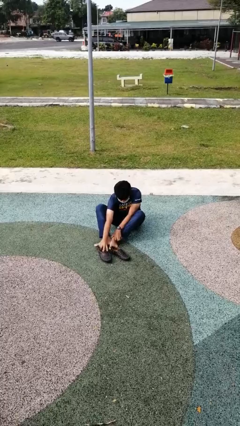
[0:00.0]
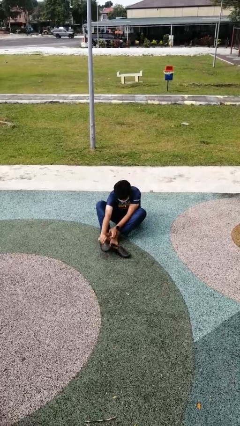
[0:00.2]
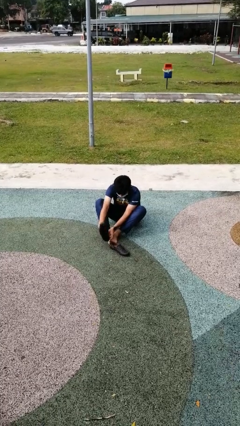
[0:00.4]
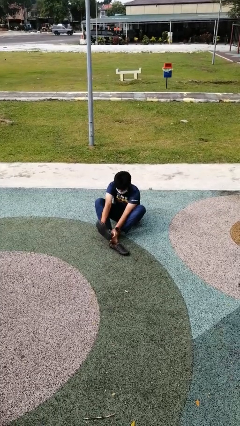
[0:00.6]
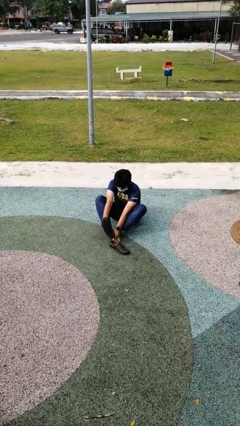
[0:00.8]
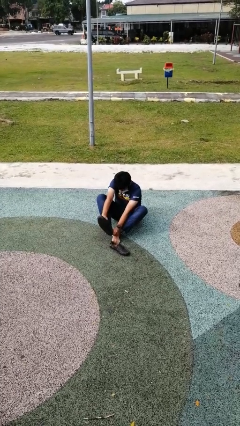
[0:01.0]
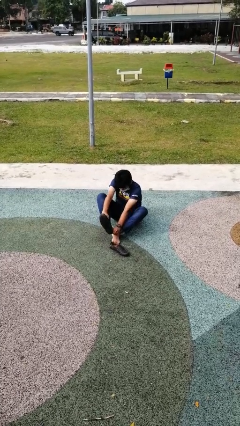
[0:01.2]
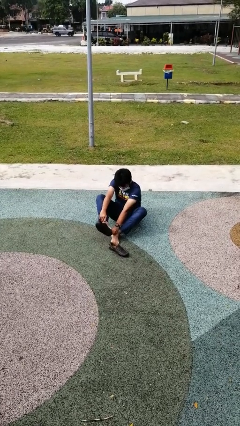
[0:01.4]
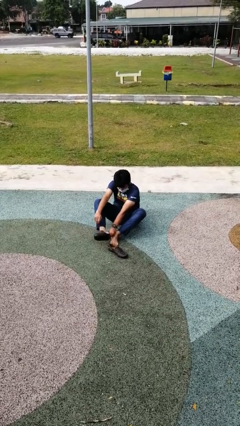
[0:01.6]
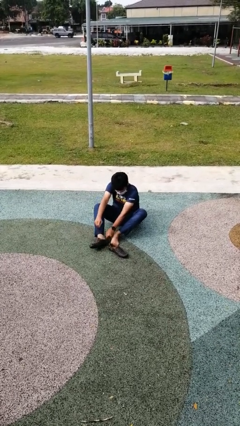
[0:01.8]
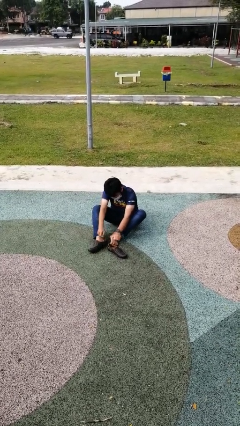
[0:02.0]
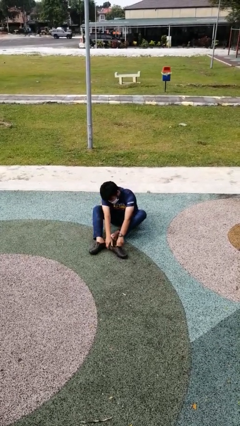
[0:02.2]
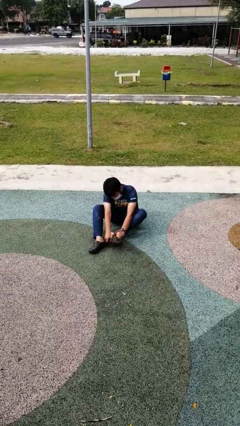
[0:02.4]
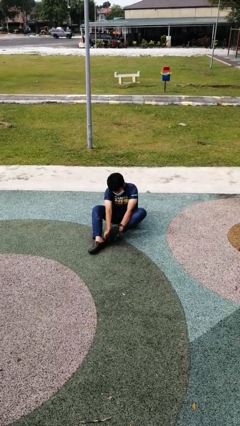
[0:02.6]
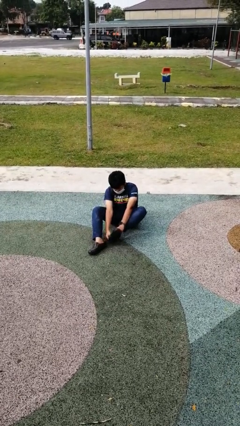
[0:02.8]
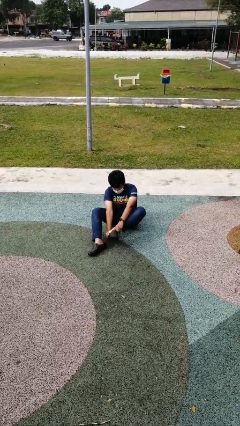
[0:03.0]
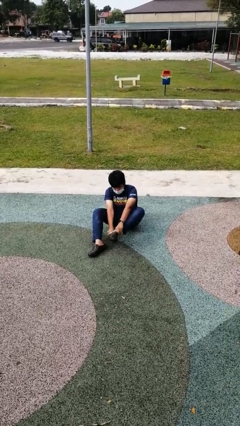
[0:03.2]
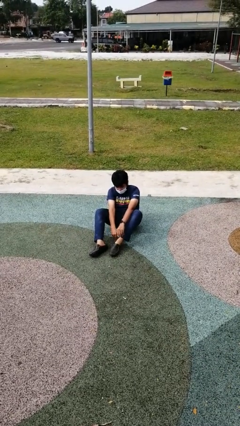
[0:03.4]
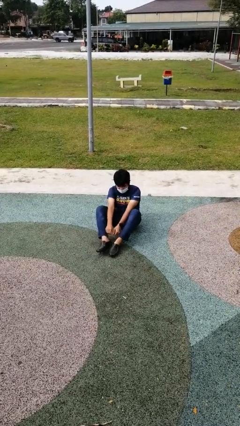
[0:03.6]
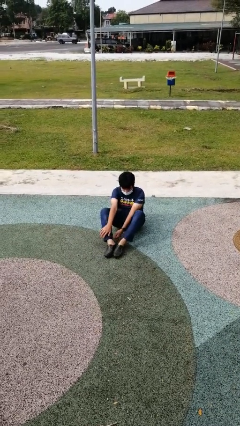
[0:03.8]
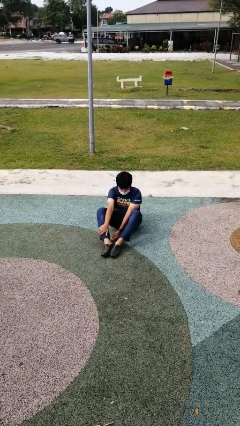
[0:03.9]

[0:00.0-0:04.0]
person puts on shoes

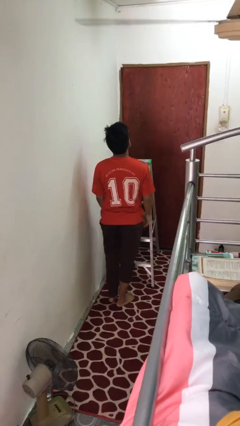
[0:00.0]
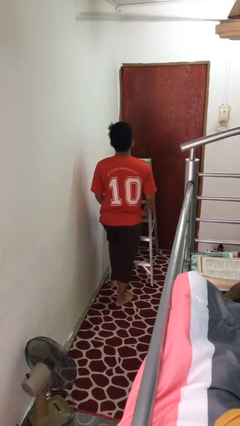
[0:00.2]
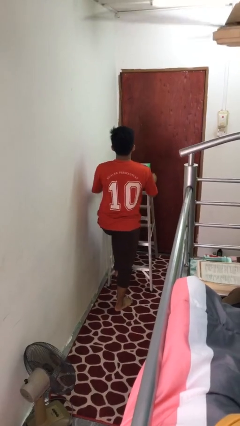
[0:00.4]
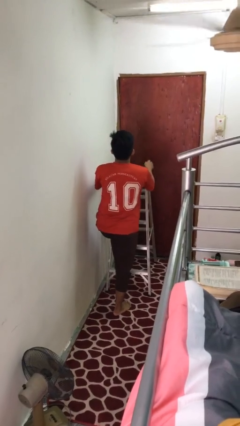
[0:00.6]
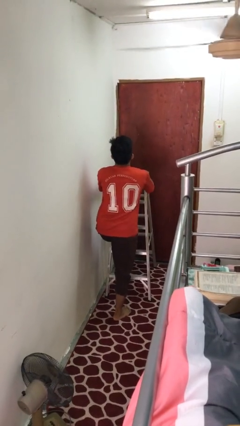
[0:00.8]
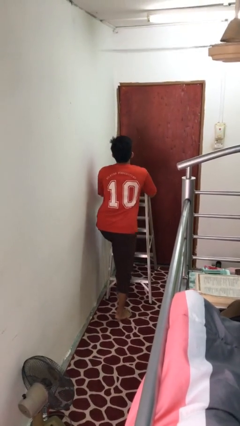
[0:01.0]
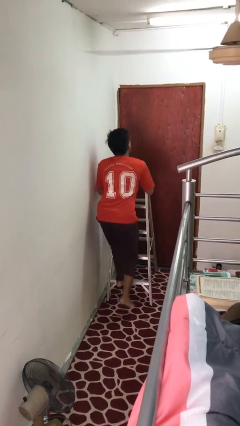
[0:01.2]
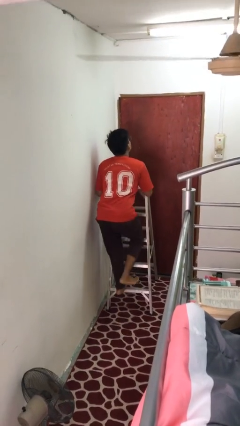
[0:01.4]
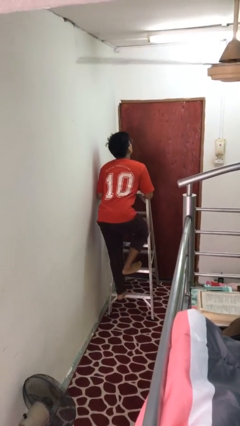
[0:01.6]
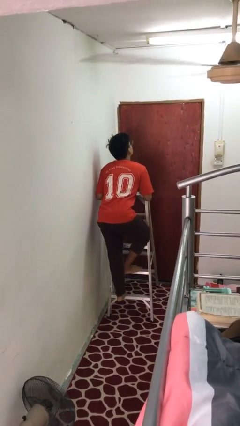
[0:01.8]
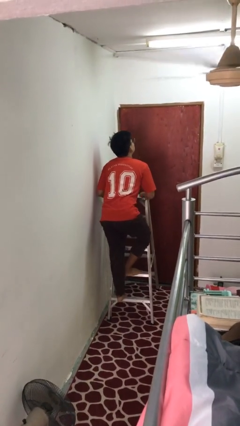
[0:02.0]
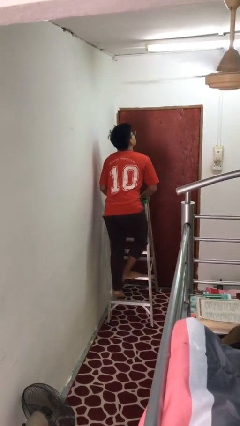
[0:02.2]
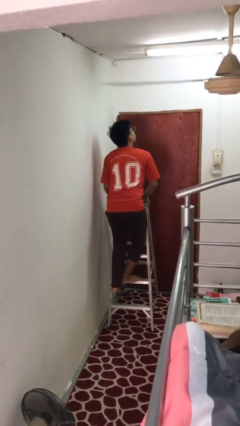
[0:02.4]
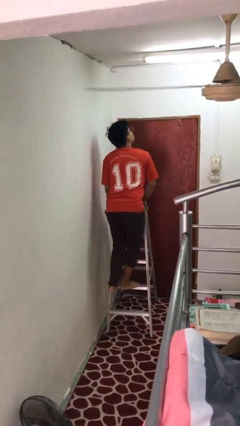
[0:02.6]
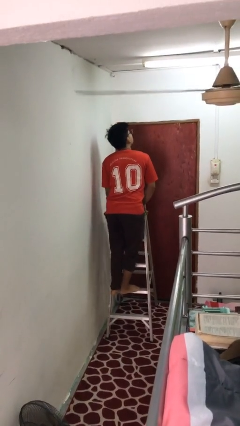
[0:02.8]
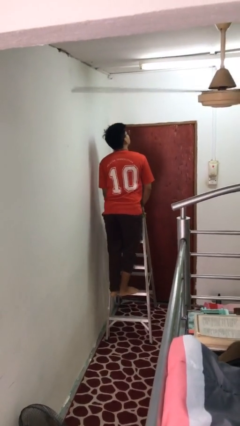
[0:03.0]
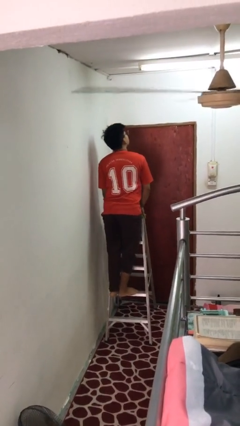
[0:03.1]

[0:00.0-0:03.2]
person climbs up ladder

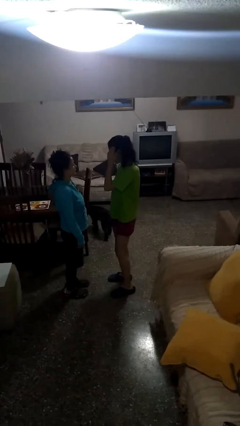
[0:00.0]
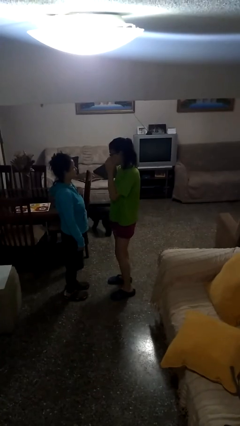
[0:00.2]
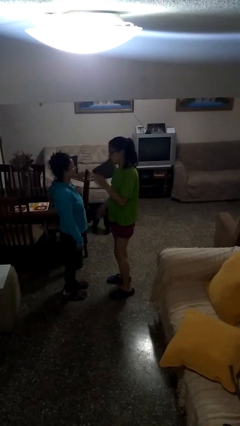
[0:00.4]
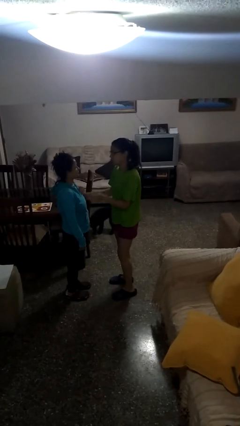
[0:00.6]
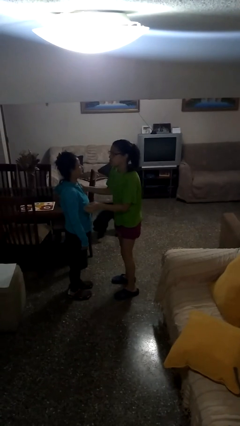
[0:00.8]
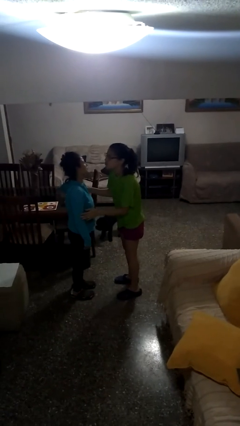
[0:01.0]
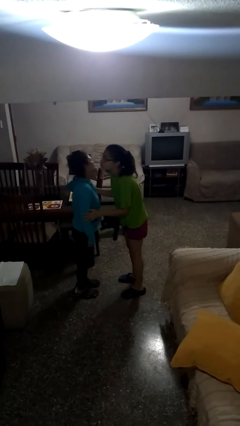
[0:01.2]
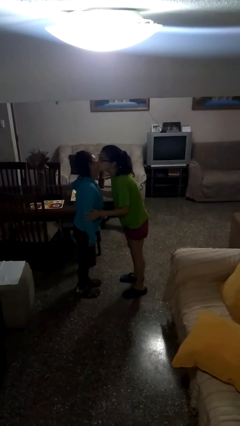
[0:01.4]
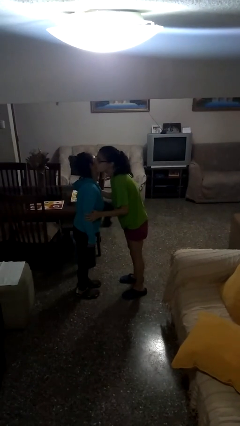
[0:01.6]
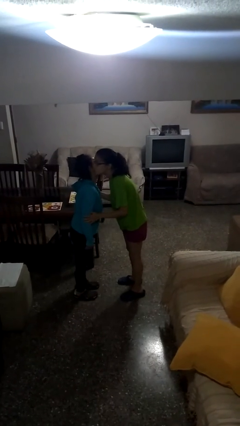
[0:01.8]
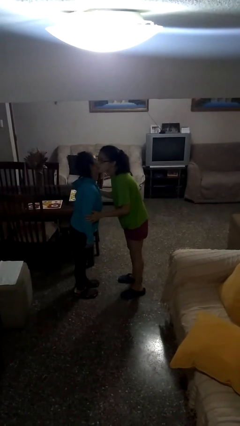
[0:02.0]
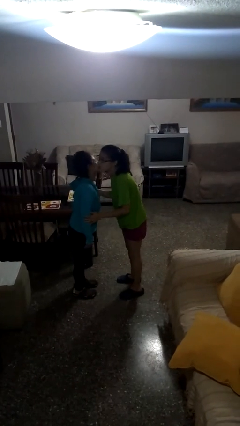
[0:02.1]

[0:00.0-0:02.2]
person kisses cheek of person

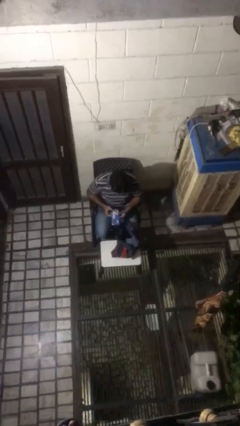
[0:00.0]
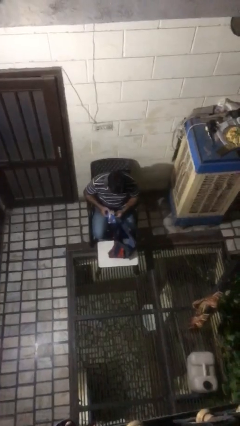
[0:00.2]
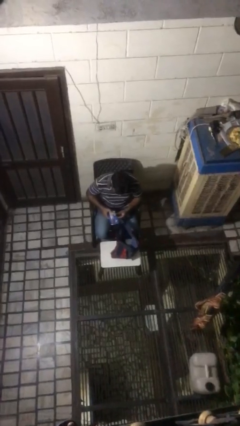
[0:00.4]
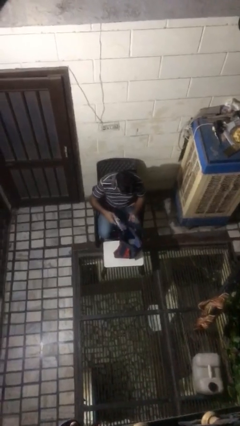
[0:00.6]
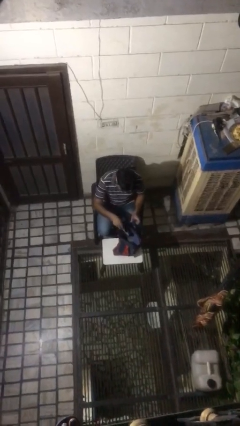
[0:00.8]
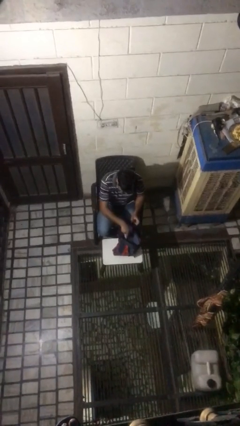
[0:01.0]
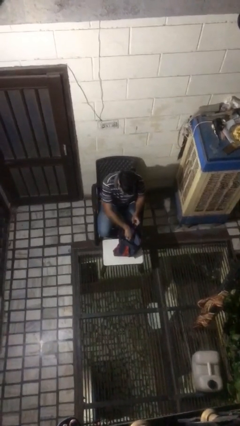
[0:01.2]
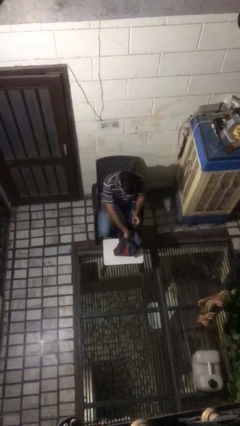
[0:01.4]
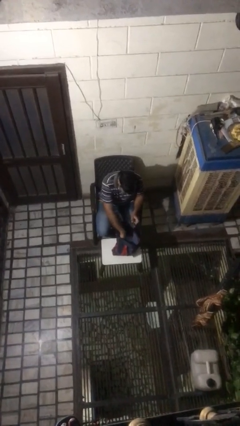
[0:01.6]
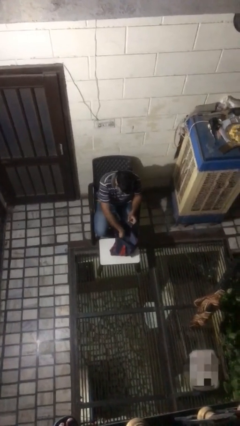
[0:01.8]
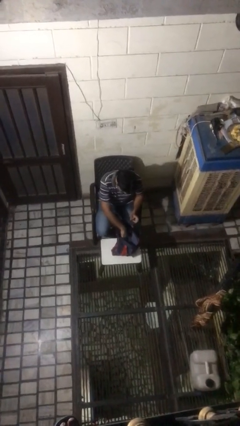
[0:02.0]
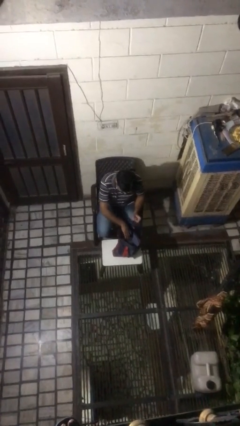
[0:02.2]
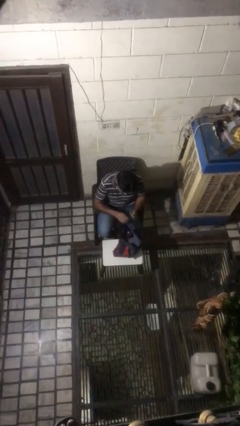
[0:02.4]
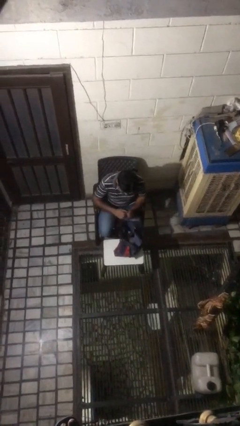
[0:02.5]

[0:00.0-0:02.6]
person puts object into bag

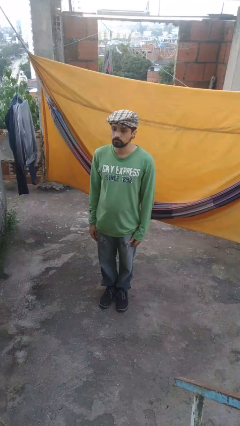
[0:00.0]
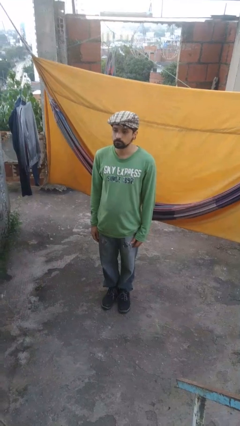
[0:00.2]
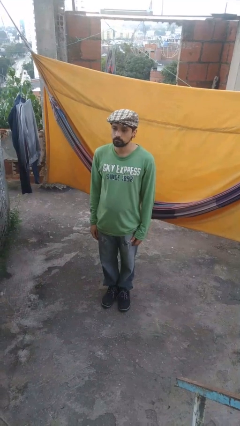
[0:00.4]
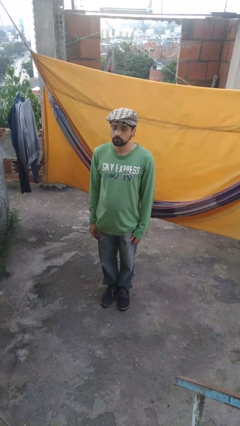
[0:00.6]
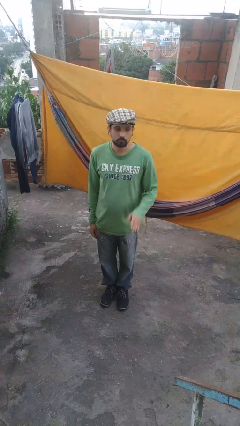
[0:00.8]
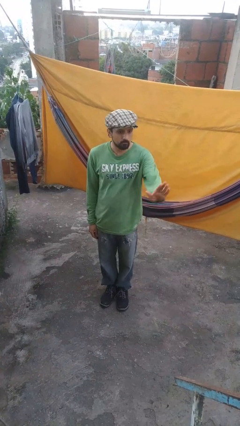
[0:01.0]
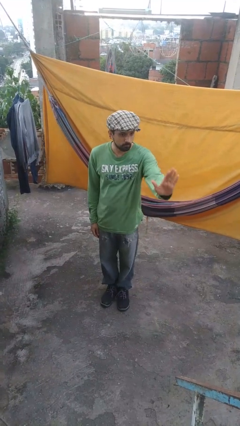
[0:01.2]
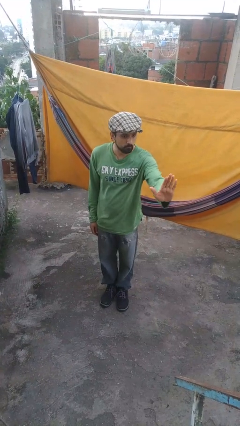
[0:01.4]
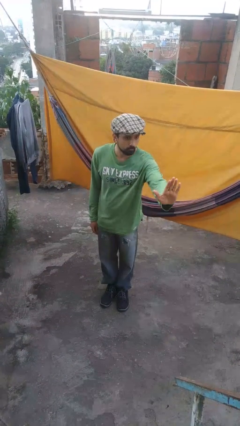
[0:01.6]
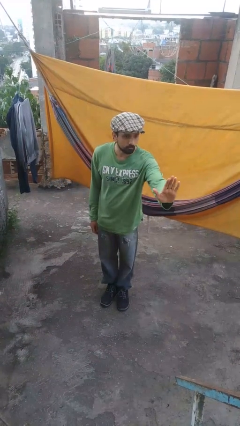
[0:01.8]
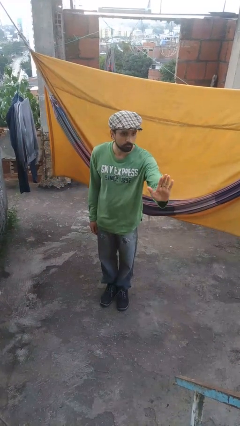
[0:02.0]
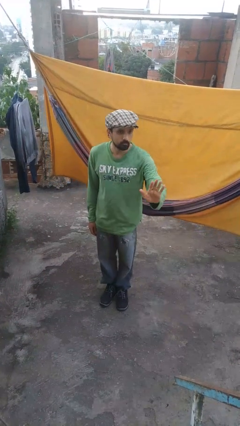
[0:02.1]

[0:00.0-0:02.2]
person gestures stop

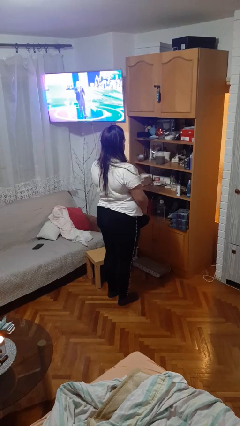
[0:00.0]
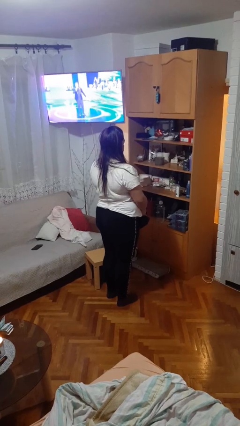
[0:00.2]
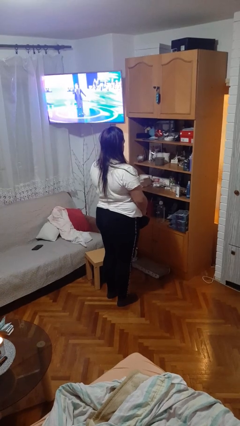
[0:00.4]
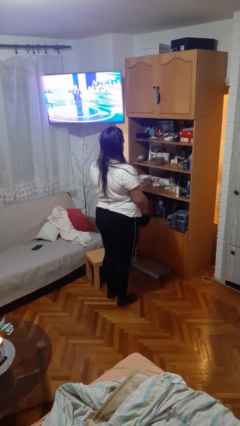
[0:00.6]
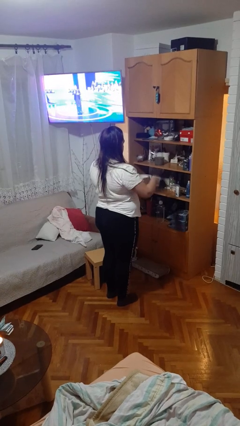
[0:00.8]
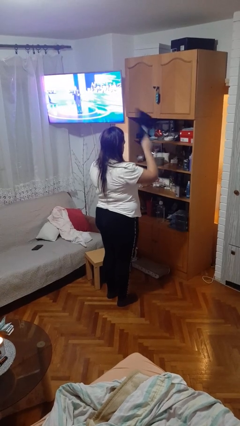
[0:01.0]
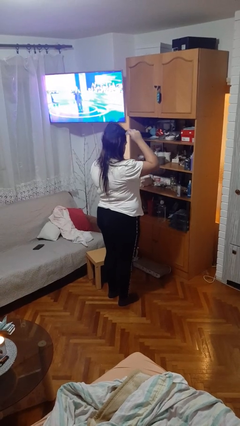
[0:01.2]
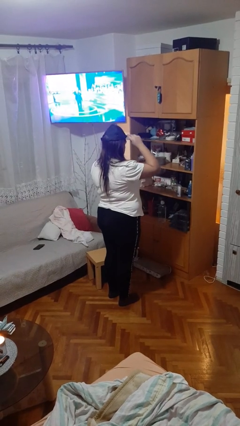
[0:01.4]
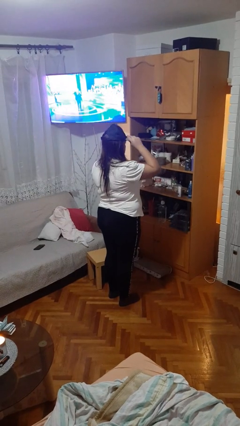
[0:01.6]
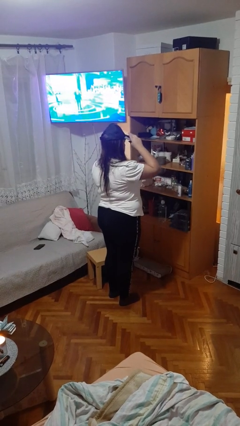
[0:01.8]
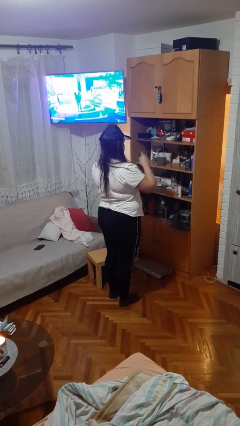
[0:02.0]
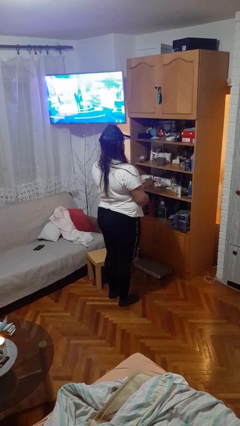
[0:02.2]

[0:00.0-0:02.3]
person puts on hat

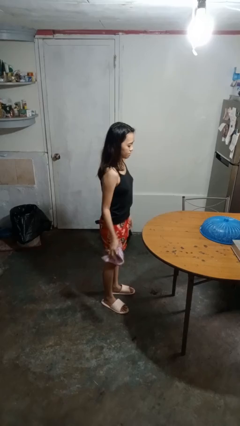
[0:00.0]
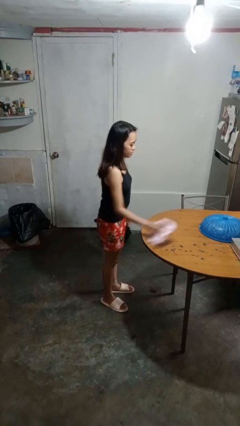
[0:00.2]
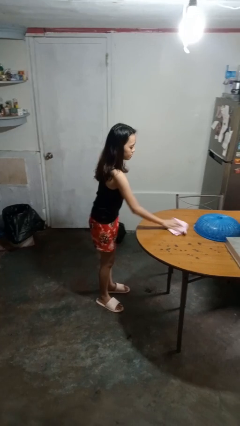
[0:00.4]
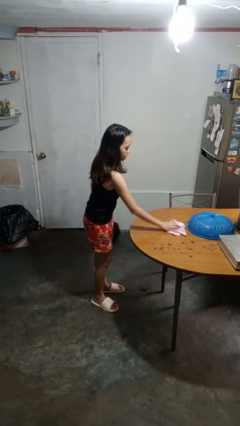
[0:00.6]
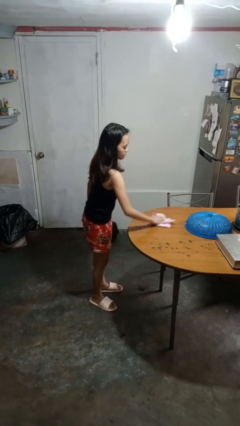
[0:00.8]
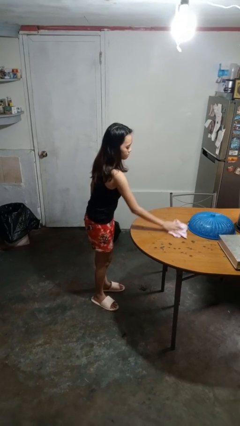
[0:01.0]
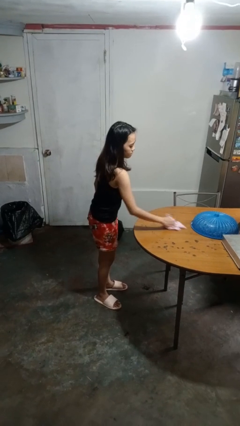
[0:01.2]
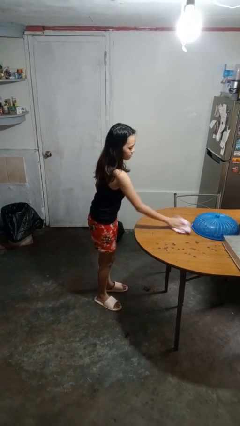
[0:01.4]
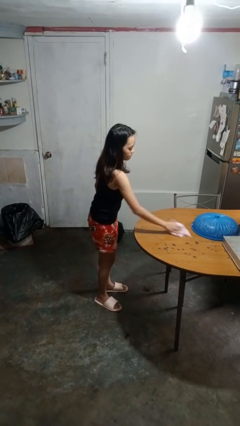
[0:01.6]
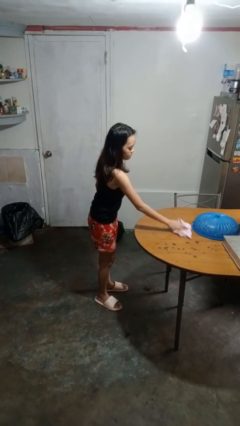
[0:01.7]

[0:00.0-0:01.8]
person cleans table with rag
